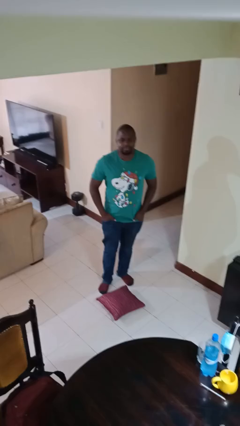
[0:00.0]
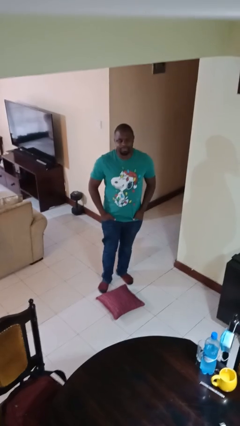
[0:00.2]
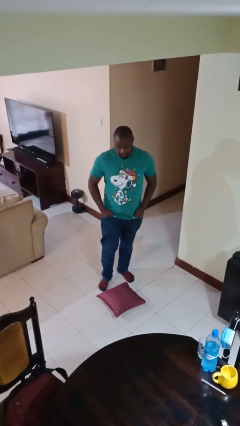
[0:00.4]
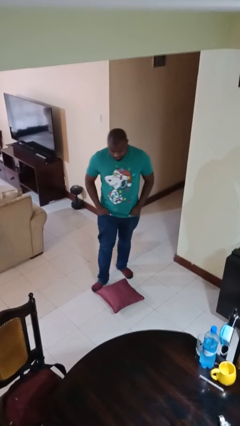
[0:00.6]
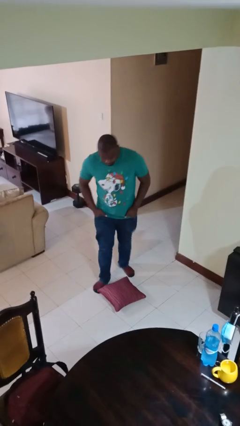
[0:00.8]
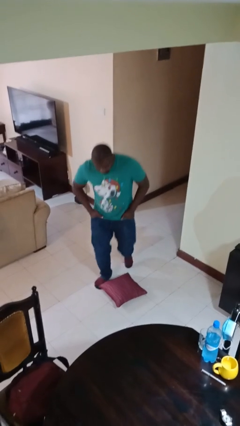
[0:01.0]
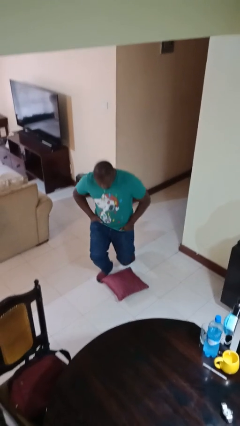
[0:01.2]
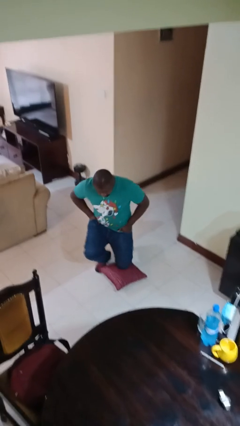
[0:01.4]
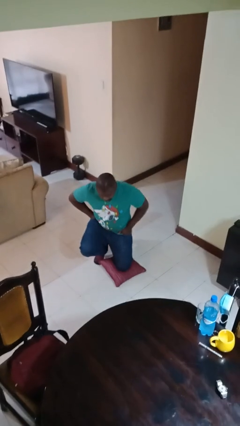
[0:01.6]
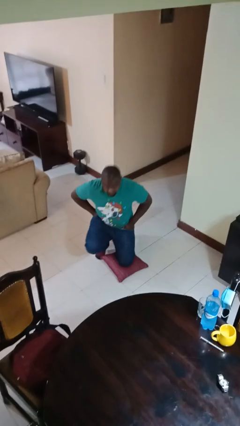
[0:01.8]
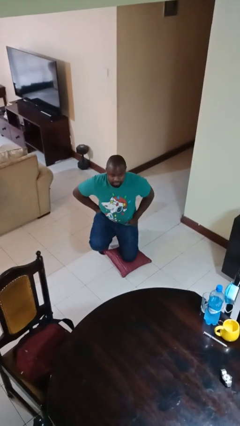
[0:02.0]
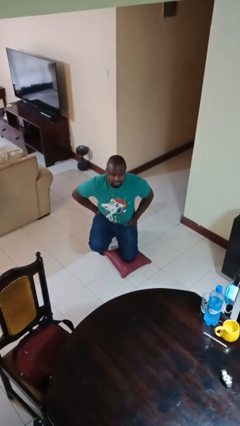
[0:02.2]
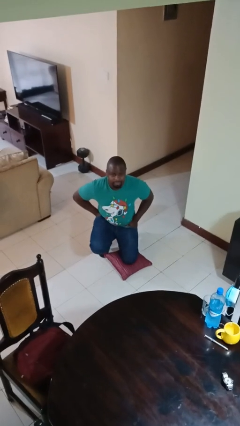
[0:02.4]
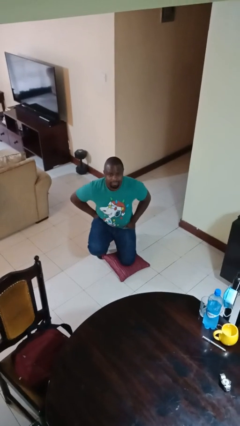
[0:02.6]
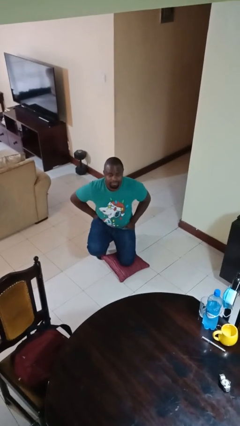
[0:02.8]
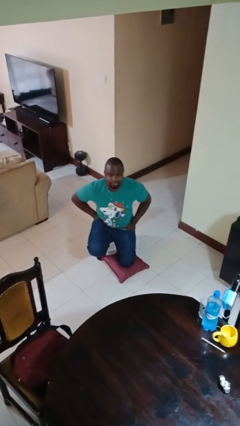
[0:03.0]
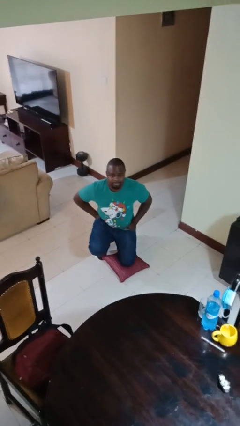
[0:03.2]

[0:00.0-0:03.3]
person kneels

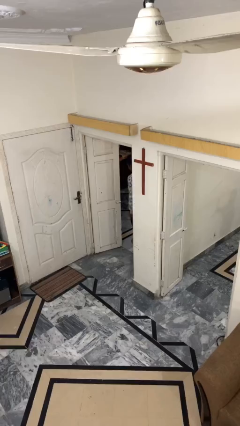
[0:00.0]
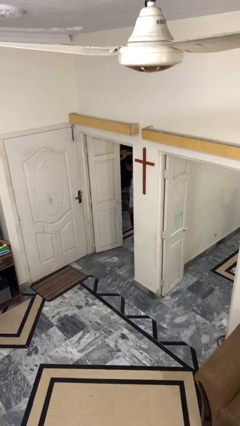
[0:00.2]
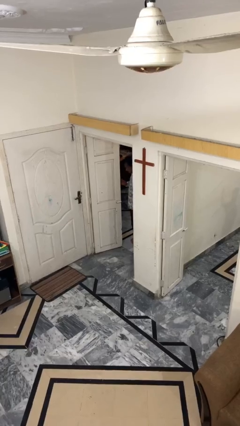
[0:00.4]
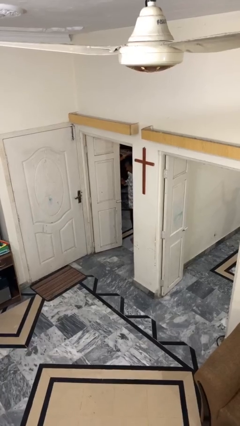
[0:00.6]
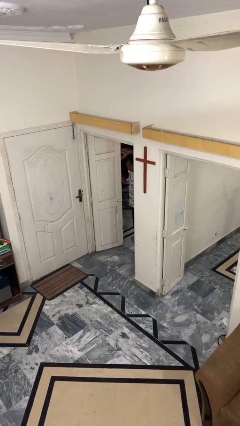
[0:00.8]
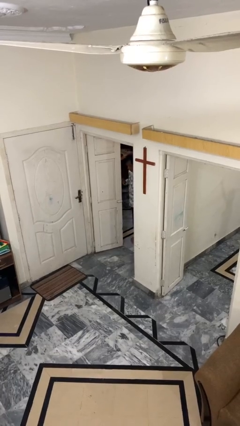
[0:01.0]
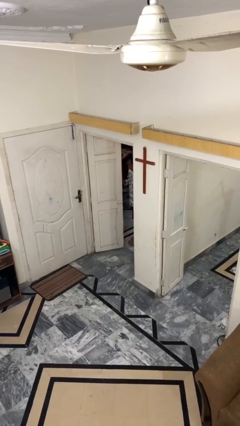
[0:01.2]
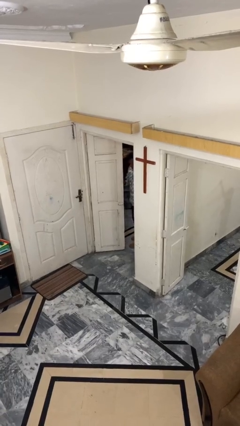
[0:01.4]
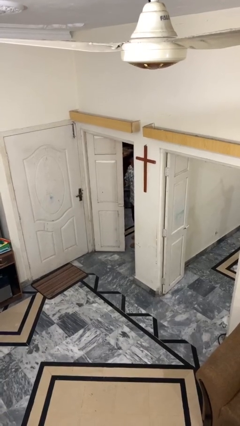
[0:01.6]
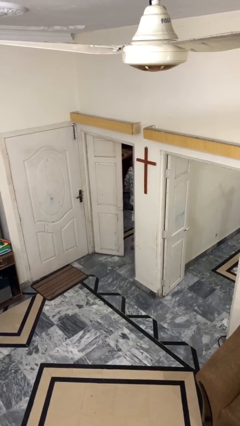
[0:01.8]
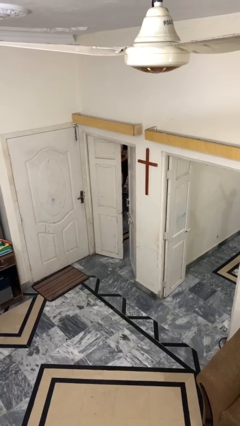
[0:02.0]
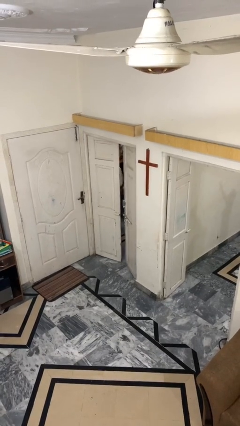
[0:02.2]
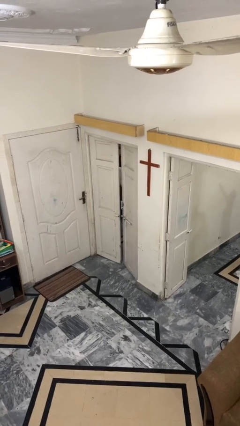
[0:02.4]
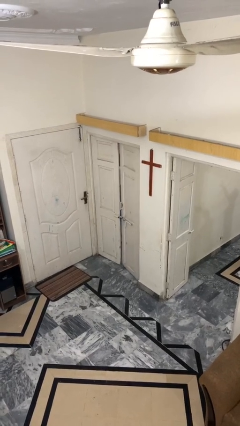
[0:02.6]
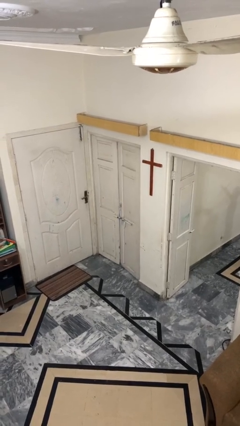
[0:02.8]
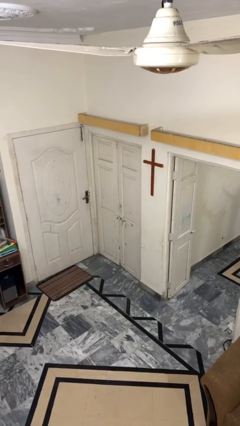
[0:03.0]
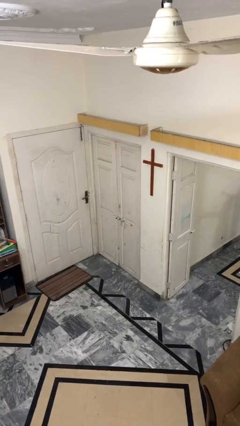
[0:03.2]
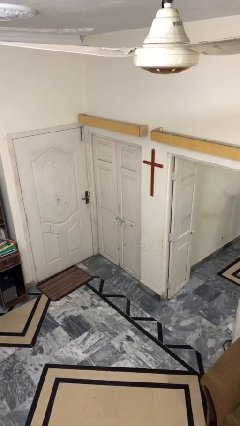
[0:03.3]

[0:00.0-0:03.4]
person closes facility door

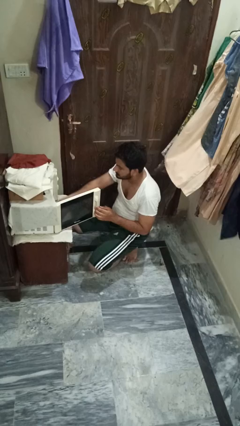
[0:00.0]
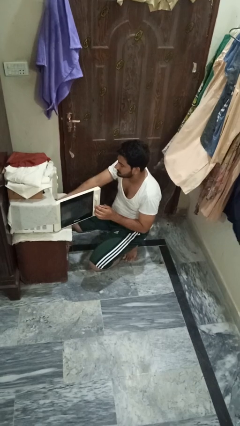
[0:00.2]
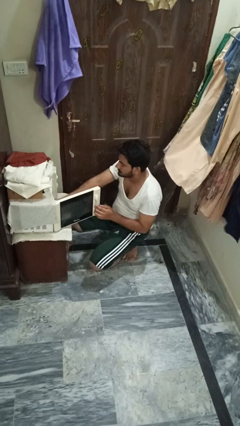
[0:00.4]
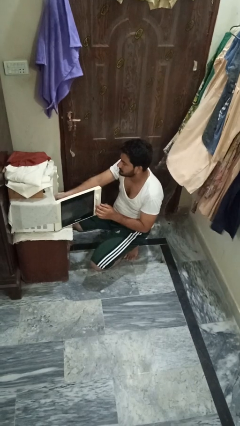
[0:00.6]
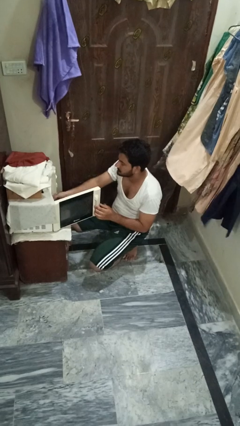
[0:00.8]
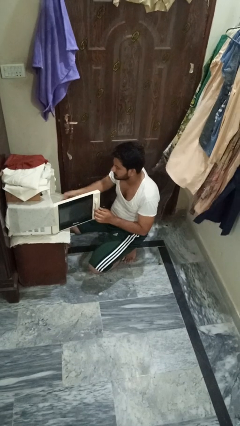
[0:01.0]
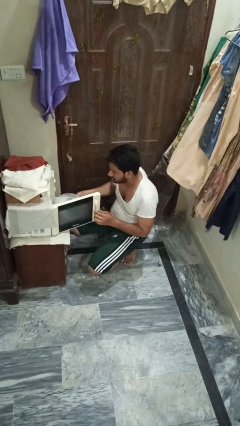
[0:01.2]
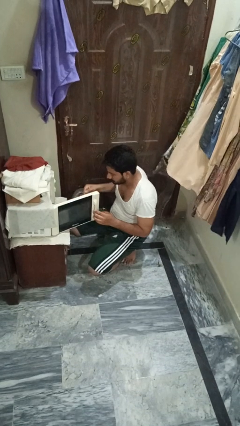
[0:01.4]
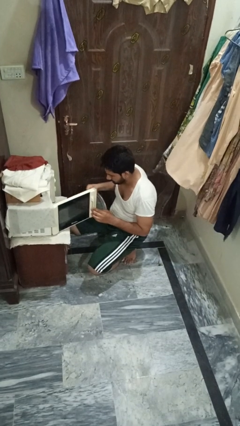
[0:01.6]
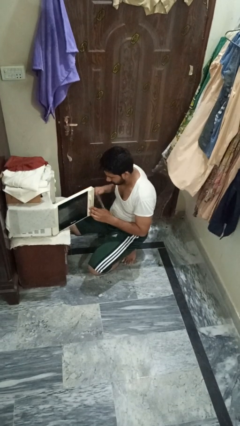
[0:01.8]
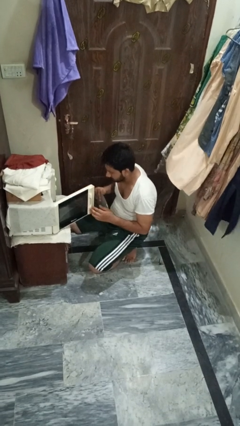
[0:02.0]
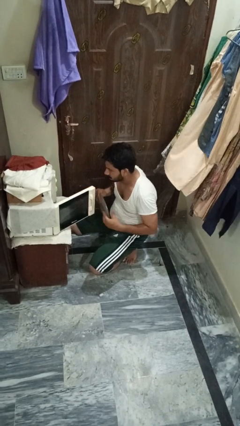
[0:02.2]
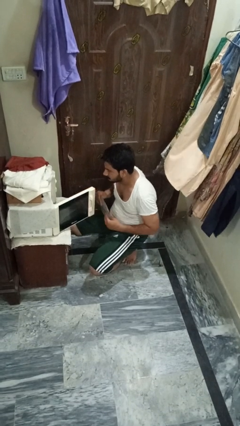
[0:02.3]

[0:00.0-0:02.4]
person takes object from oven

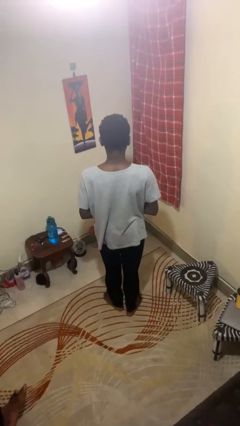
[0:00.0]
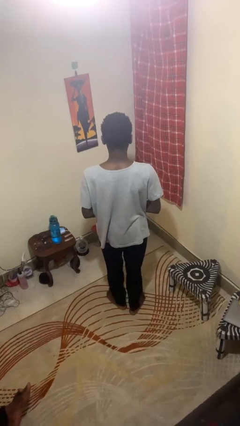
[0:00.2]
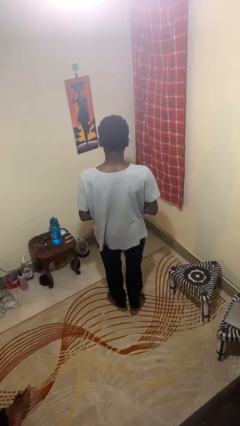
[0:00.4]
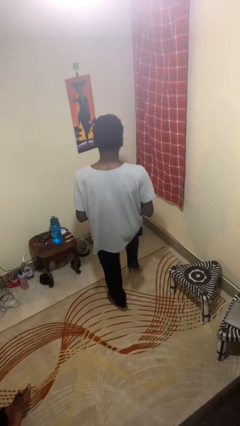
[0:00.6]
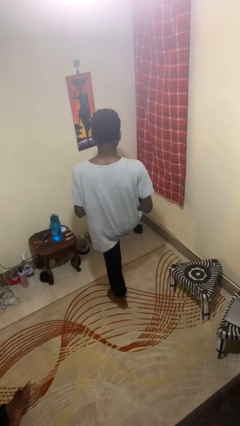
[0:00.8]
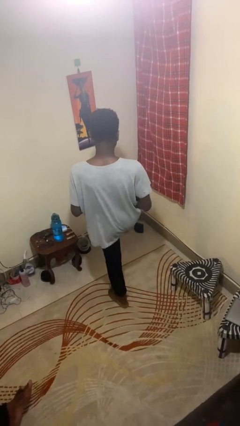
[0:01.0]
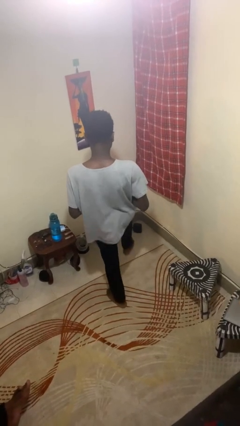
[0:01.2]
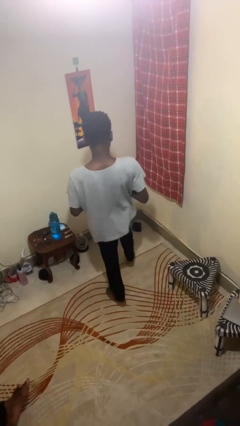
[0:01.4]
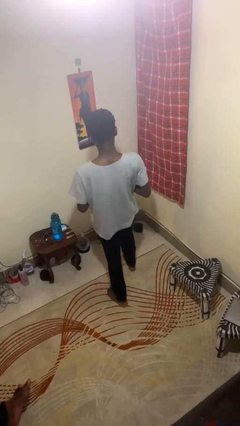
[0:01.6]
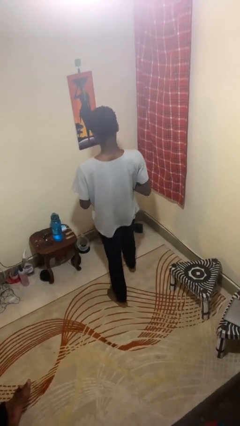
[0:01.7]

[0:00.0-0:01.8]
person karate kicks

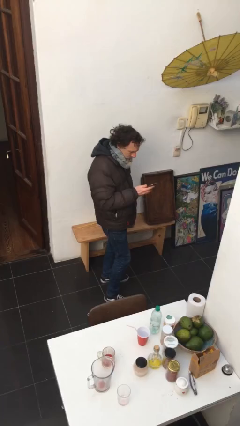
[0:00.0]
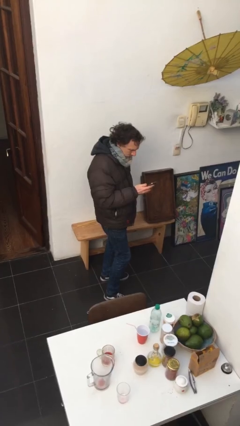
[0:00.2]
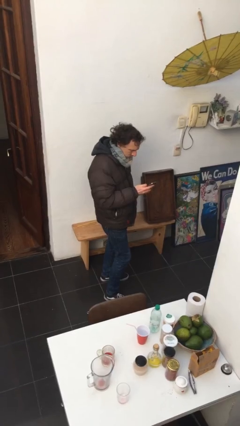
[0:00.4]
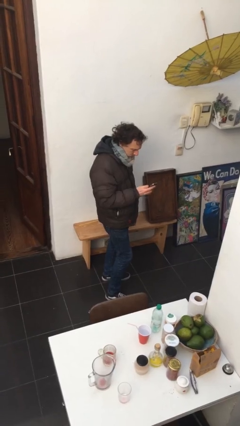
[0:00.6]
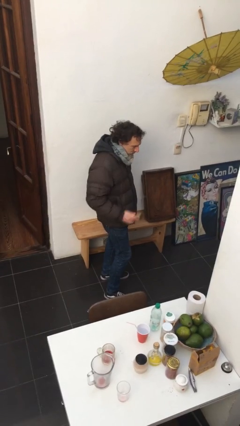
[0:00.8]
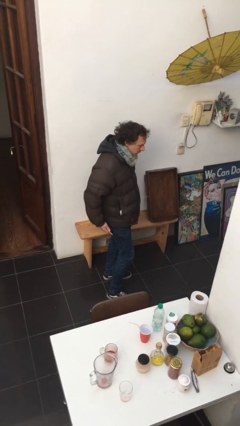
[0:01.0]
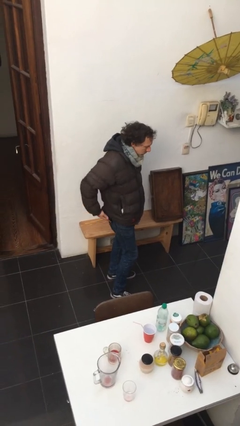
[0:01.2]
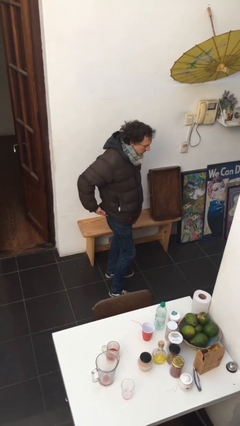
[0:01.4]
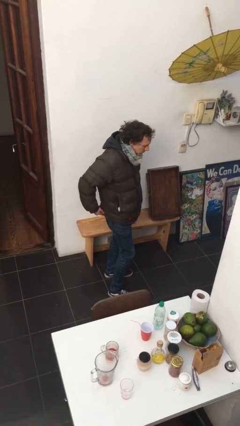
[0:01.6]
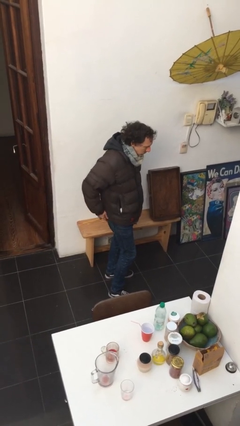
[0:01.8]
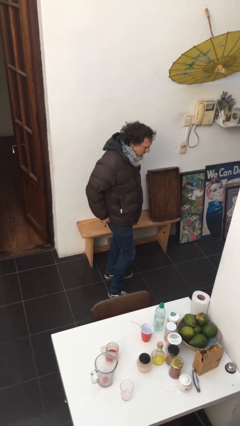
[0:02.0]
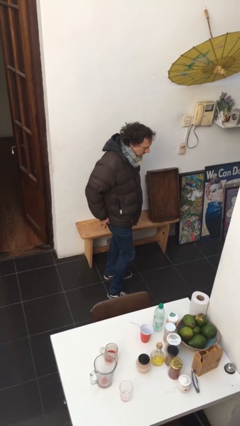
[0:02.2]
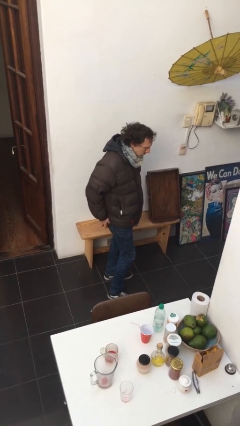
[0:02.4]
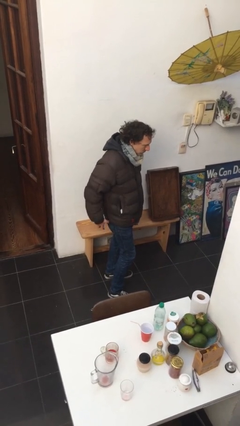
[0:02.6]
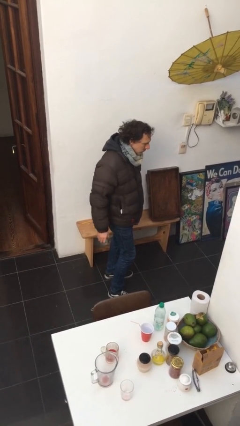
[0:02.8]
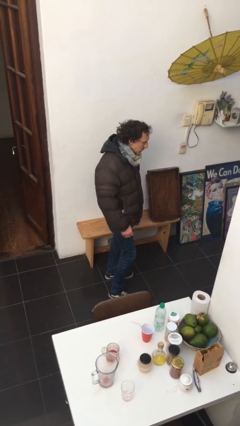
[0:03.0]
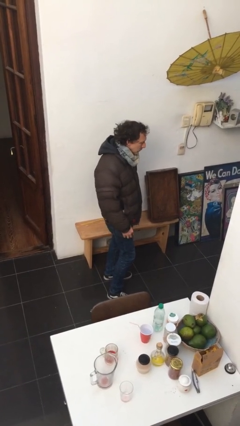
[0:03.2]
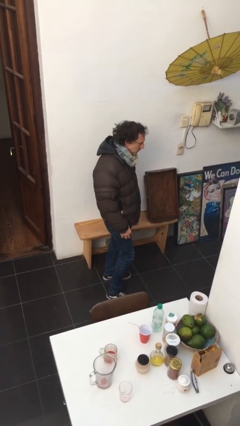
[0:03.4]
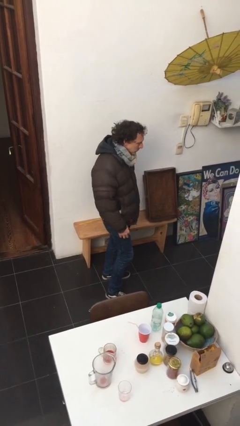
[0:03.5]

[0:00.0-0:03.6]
person puts phone into pocket

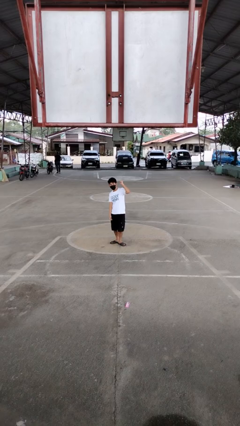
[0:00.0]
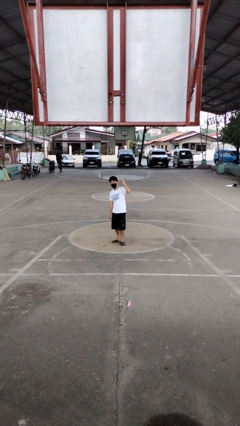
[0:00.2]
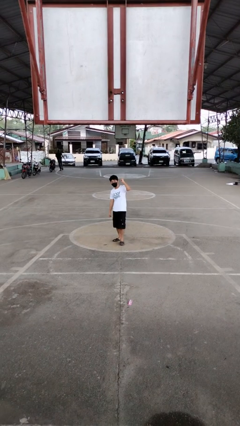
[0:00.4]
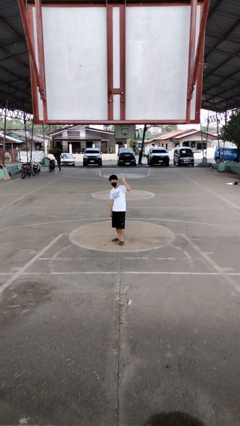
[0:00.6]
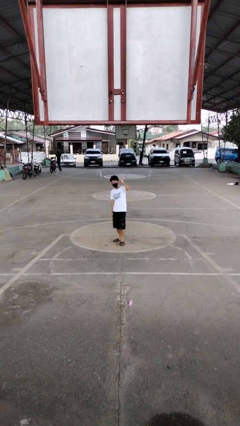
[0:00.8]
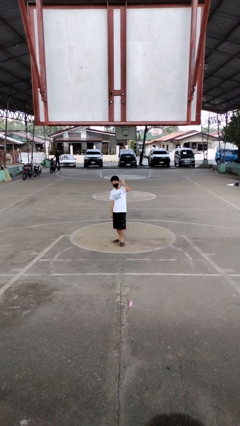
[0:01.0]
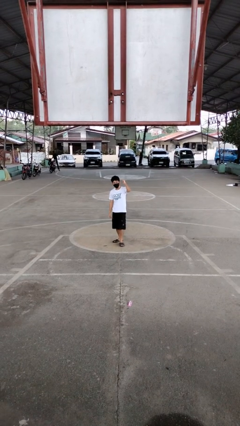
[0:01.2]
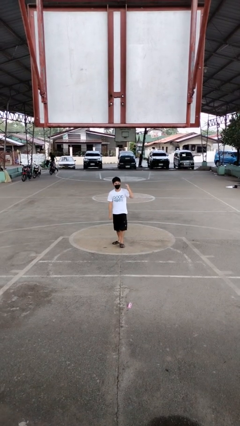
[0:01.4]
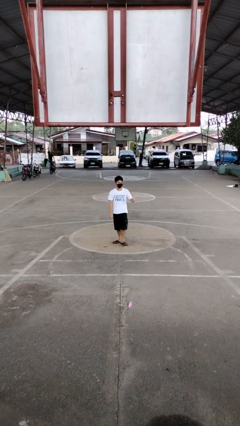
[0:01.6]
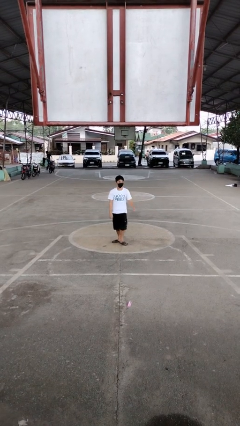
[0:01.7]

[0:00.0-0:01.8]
person gestures behind me

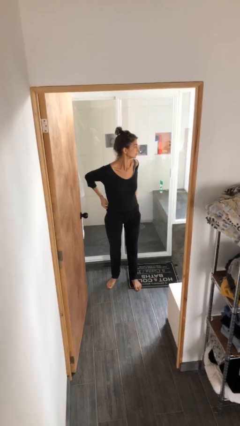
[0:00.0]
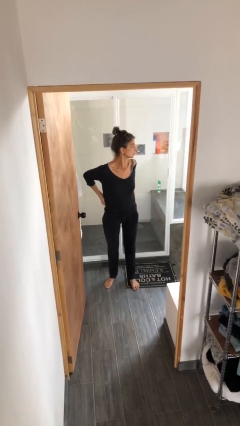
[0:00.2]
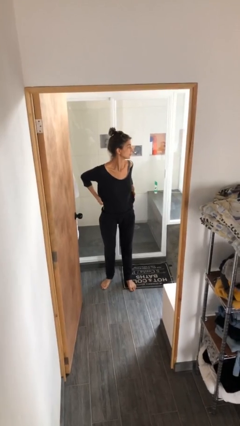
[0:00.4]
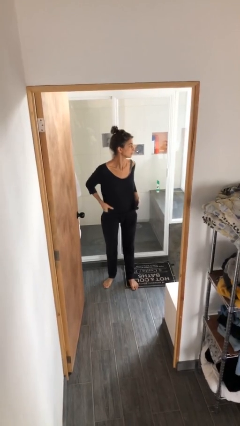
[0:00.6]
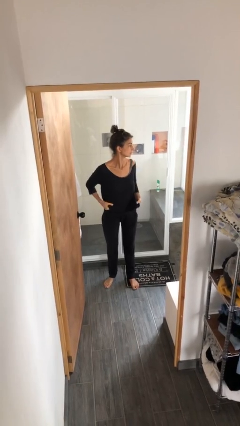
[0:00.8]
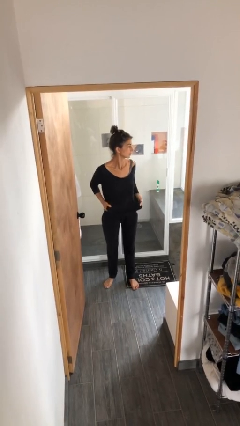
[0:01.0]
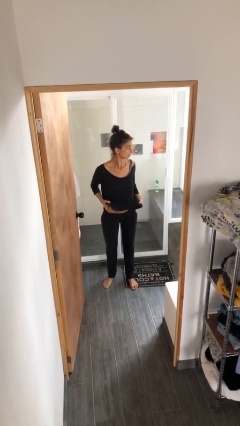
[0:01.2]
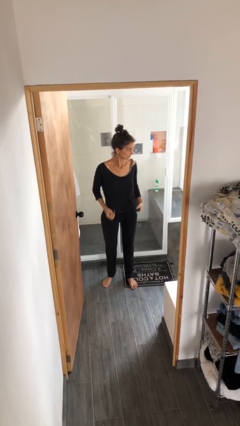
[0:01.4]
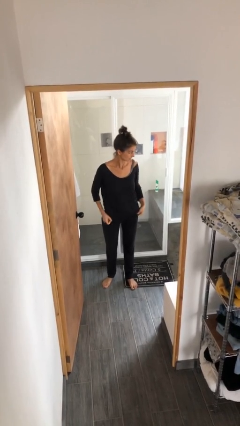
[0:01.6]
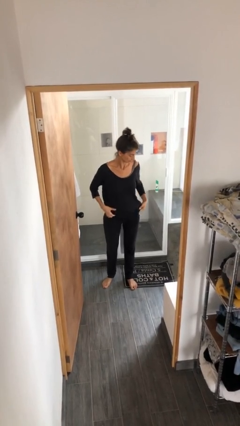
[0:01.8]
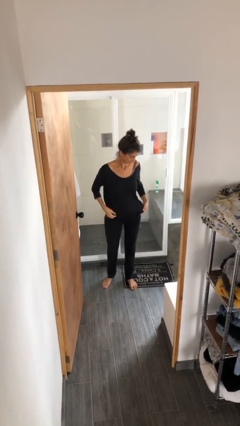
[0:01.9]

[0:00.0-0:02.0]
person untucks shirt
